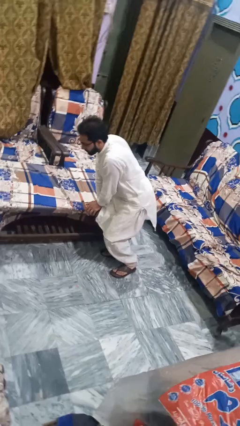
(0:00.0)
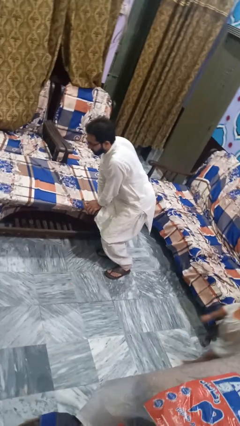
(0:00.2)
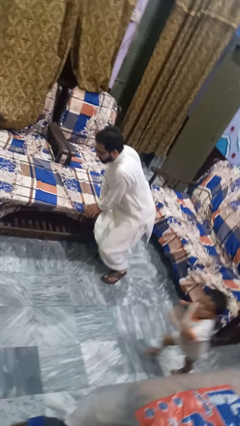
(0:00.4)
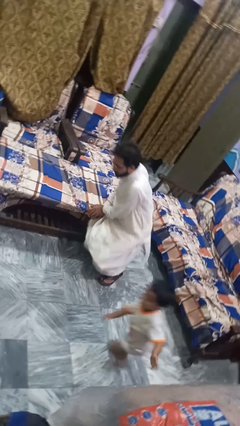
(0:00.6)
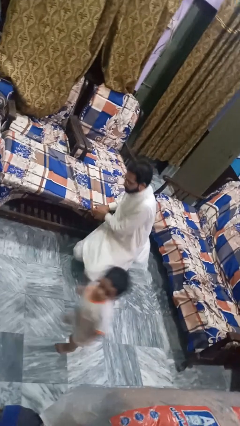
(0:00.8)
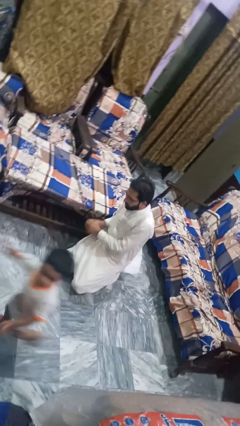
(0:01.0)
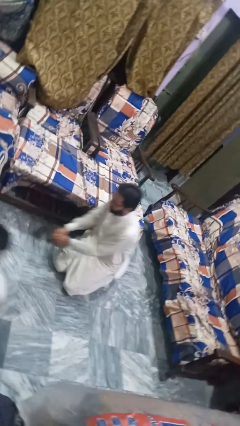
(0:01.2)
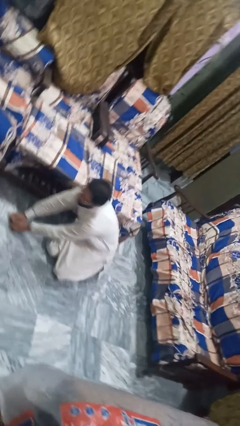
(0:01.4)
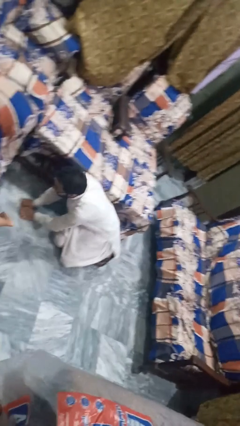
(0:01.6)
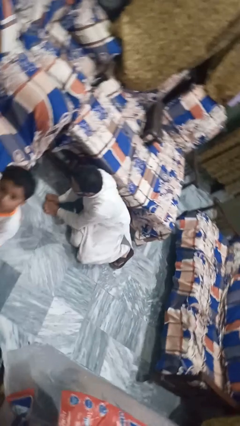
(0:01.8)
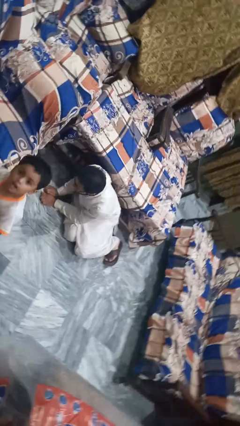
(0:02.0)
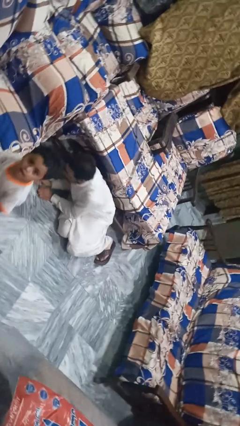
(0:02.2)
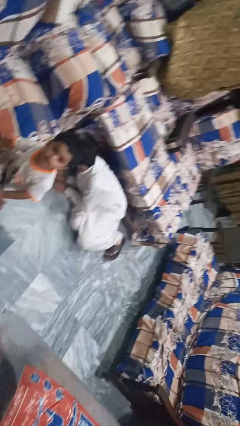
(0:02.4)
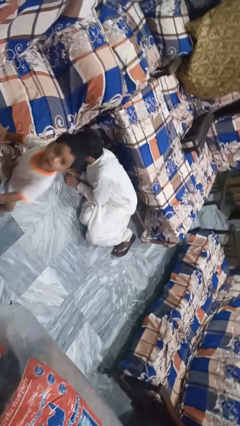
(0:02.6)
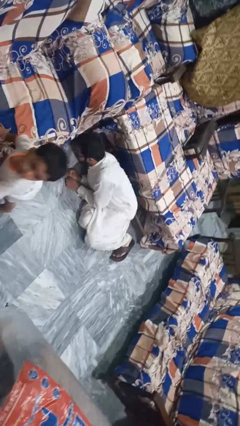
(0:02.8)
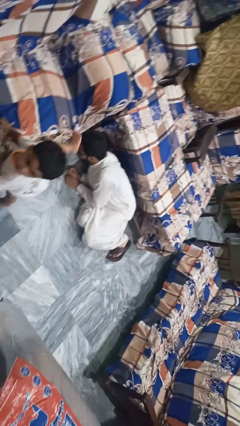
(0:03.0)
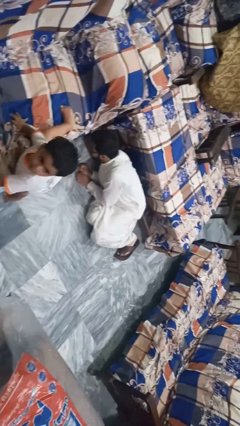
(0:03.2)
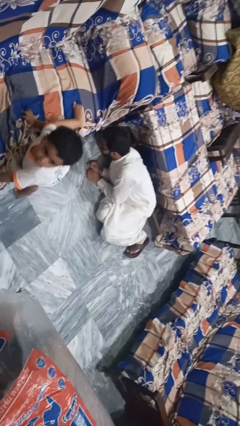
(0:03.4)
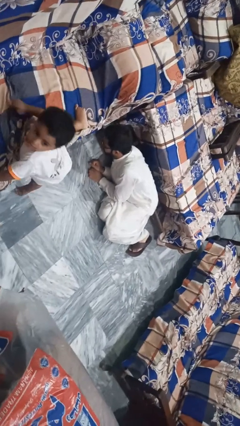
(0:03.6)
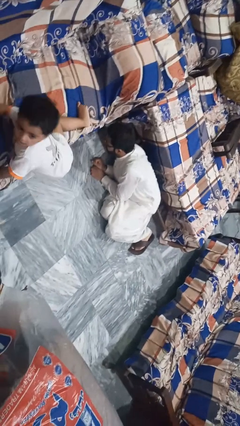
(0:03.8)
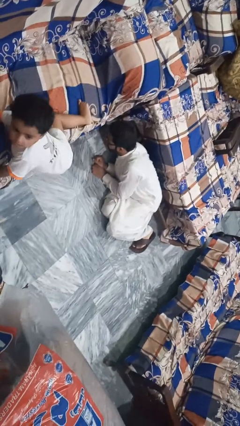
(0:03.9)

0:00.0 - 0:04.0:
person lies down on floor

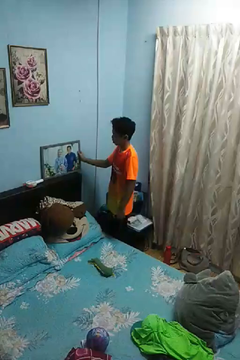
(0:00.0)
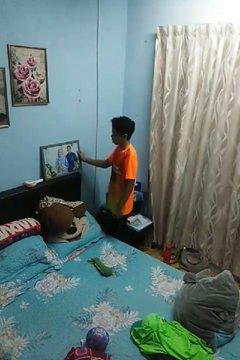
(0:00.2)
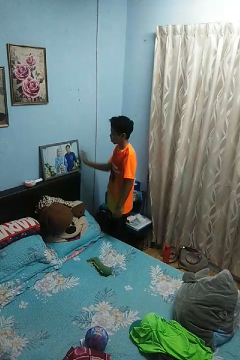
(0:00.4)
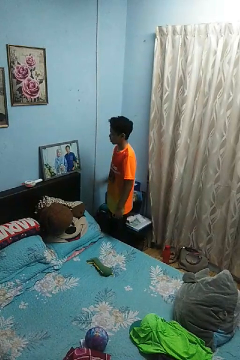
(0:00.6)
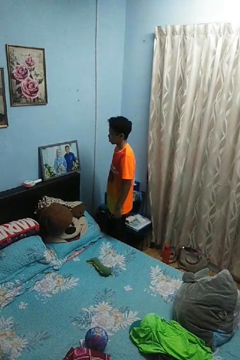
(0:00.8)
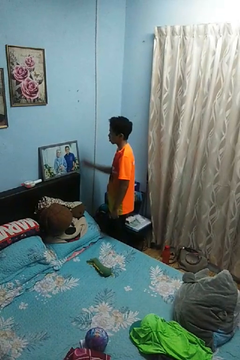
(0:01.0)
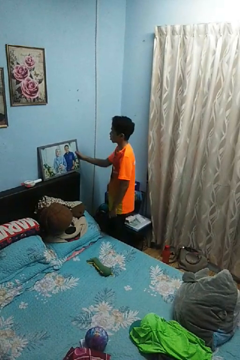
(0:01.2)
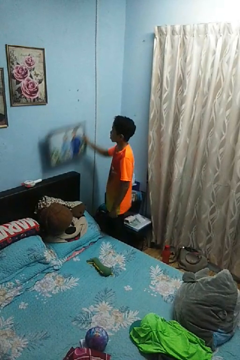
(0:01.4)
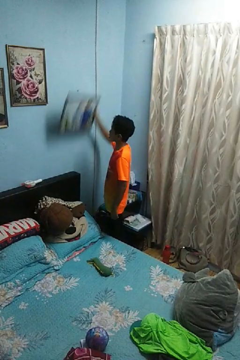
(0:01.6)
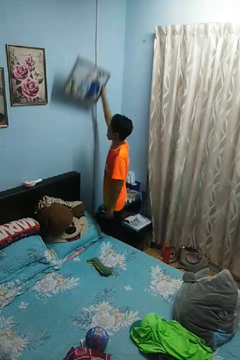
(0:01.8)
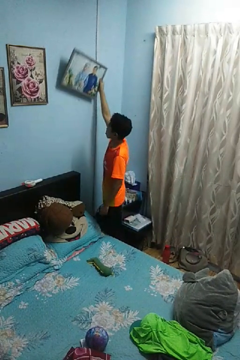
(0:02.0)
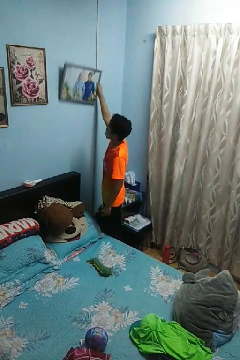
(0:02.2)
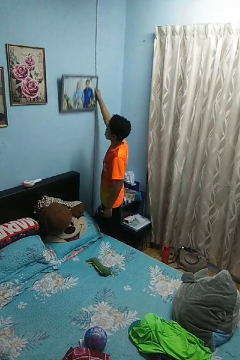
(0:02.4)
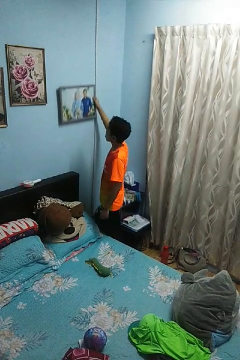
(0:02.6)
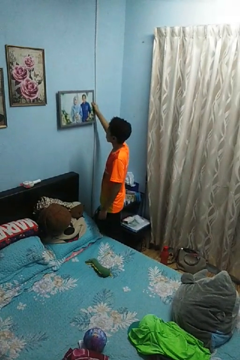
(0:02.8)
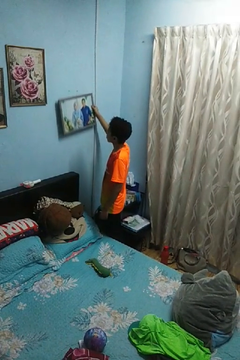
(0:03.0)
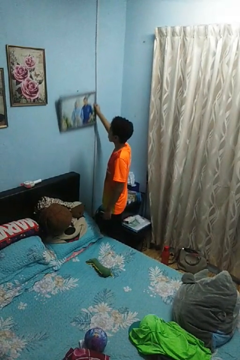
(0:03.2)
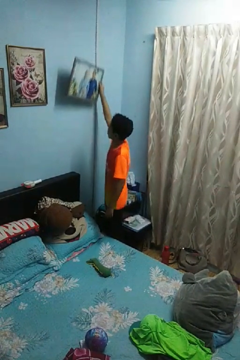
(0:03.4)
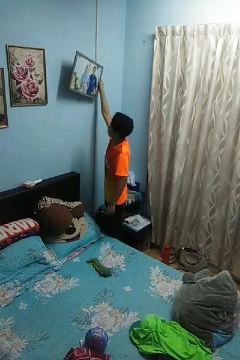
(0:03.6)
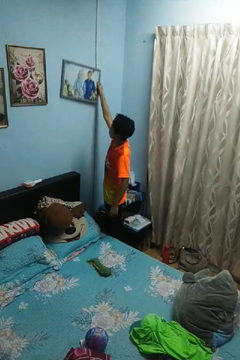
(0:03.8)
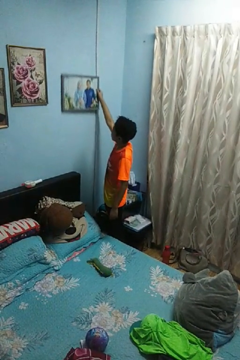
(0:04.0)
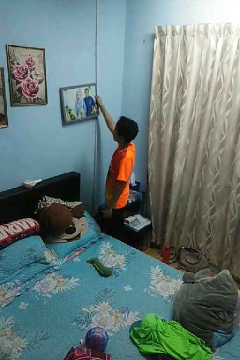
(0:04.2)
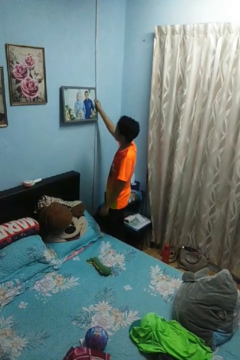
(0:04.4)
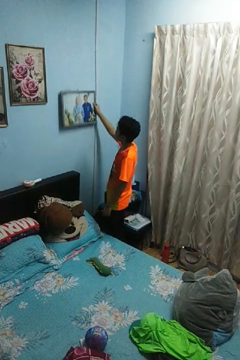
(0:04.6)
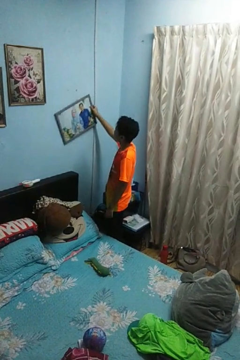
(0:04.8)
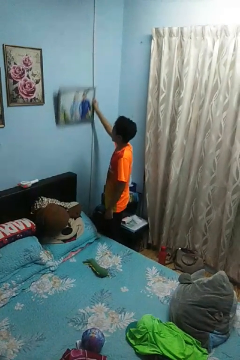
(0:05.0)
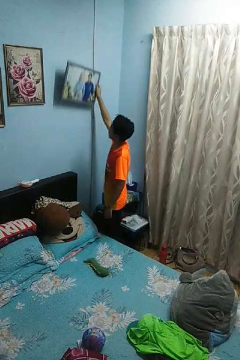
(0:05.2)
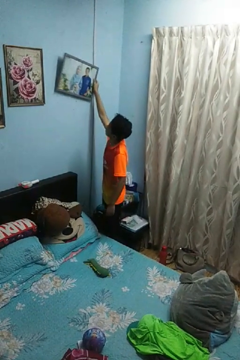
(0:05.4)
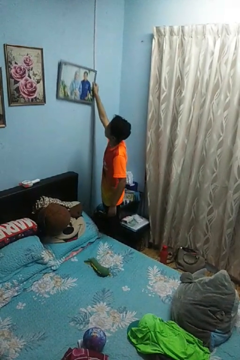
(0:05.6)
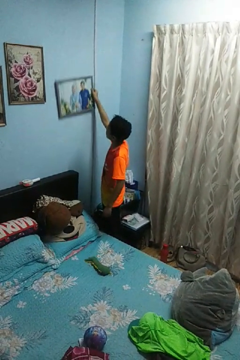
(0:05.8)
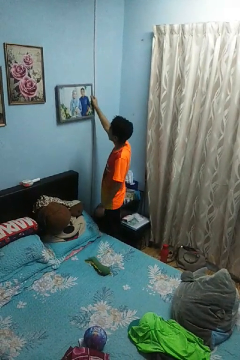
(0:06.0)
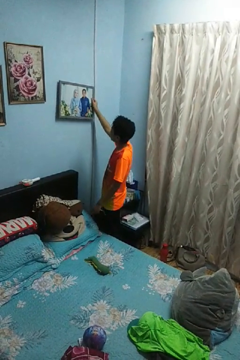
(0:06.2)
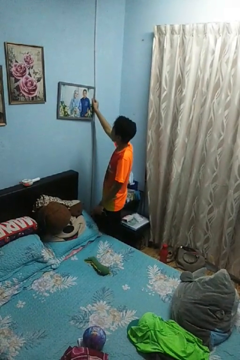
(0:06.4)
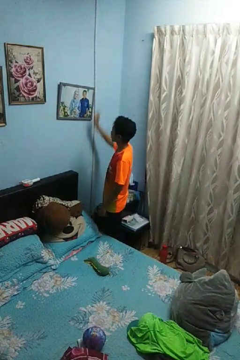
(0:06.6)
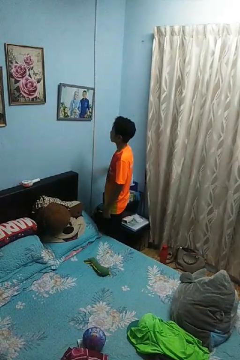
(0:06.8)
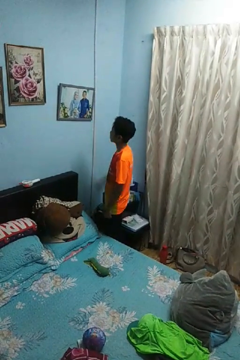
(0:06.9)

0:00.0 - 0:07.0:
person puts up picture frame

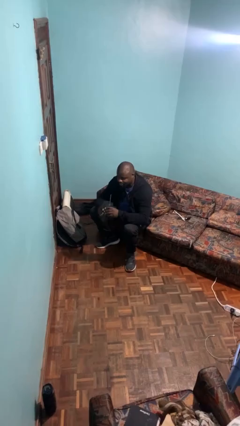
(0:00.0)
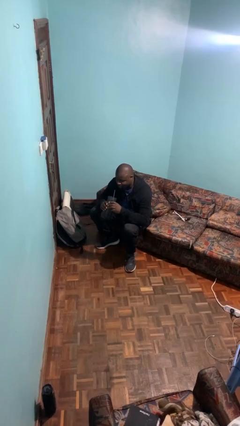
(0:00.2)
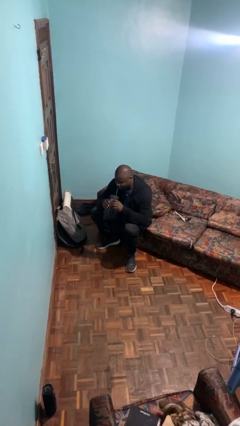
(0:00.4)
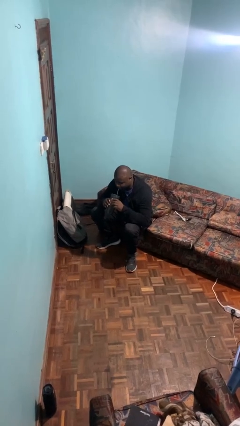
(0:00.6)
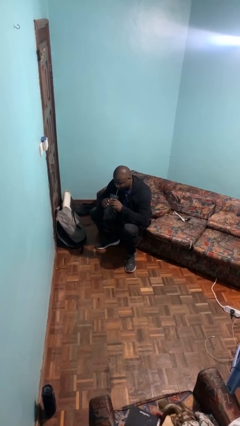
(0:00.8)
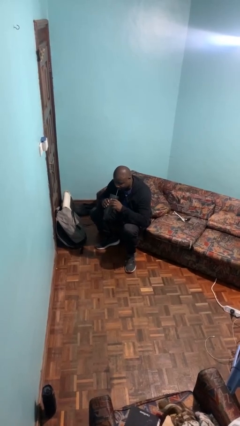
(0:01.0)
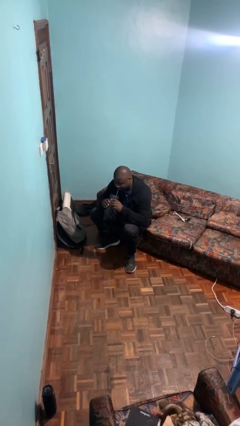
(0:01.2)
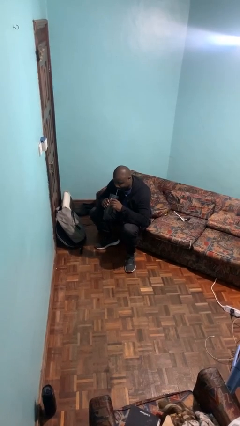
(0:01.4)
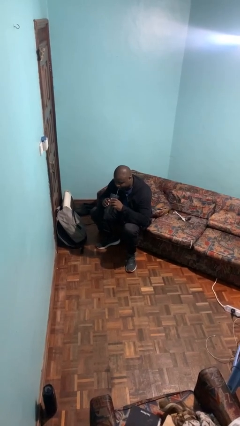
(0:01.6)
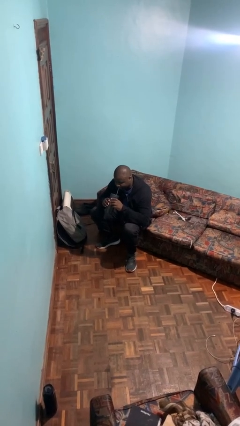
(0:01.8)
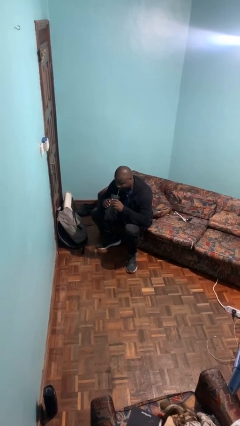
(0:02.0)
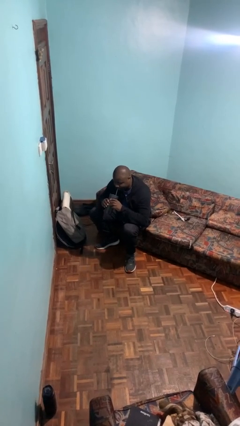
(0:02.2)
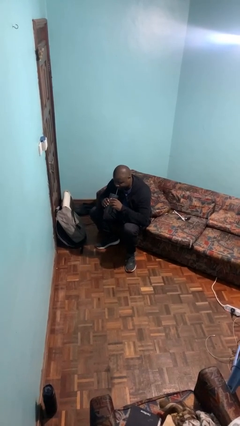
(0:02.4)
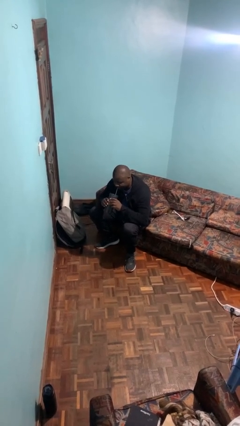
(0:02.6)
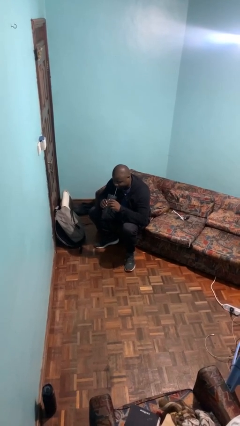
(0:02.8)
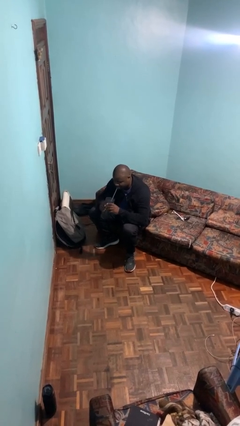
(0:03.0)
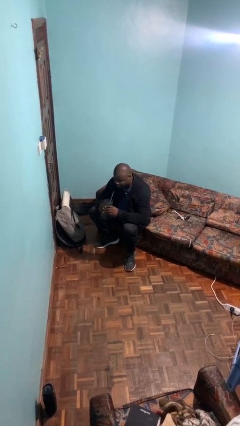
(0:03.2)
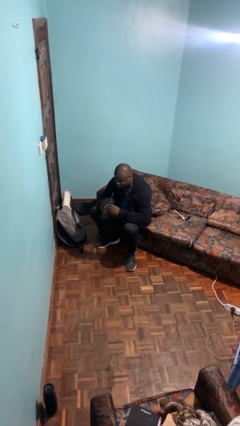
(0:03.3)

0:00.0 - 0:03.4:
person drinks from straw

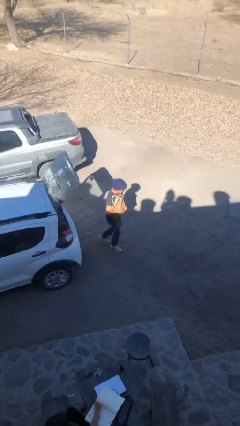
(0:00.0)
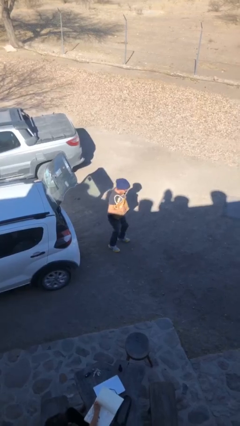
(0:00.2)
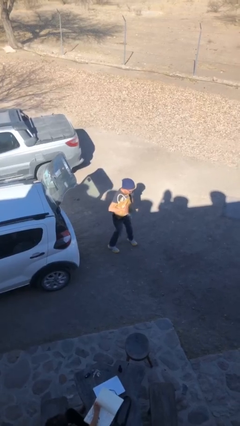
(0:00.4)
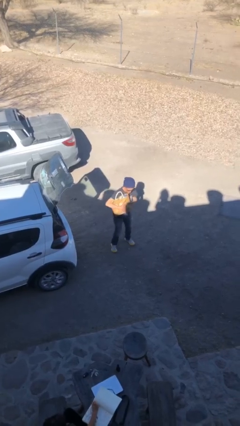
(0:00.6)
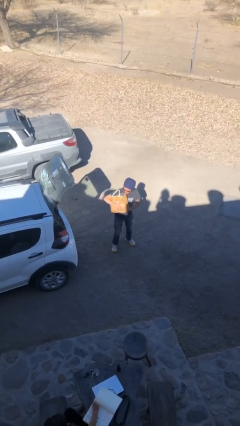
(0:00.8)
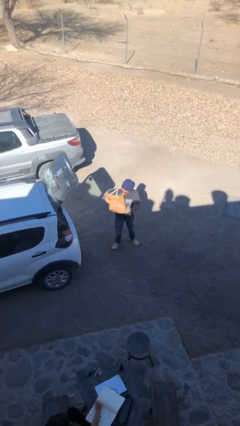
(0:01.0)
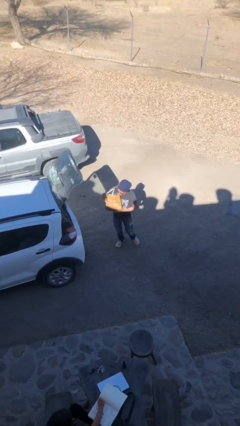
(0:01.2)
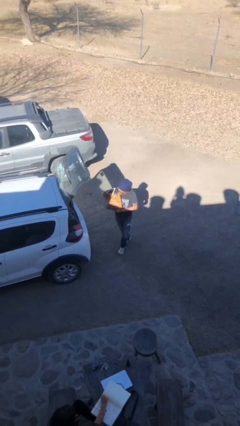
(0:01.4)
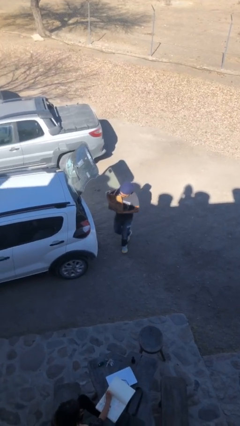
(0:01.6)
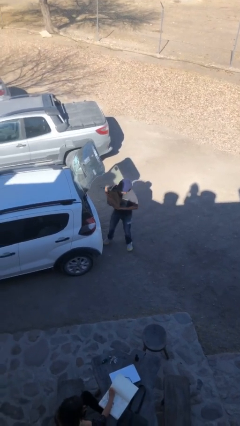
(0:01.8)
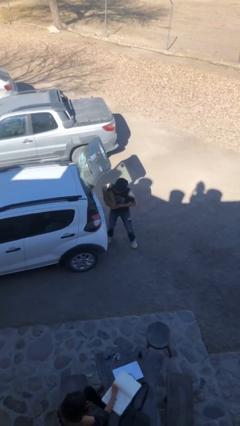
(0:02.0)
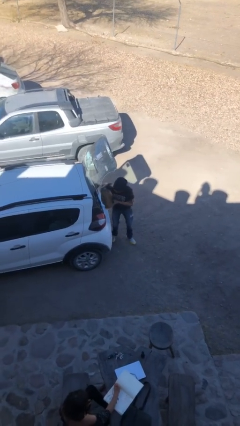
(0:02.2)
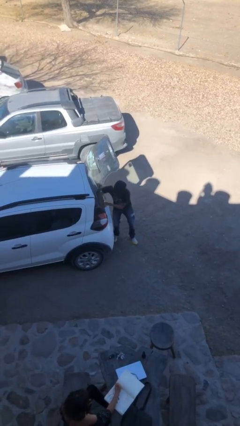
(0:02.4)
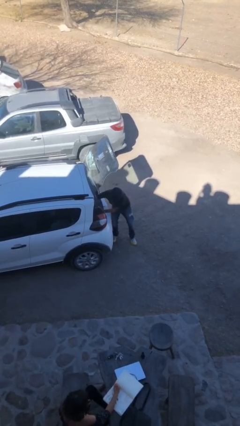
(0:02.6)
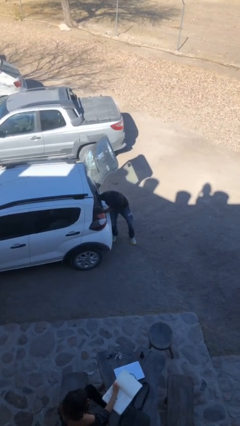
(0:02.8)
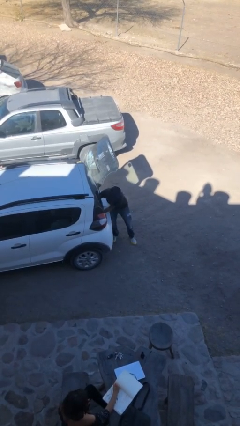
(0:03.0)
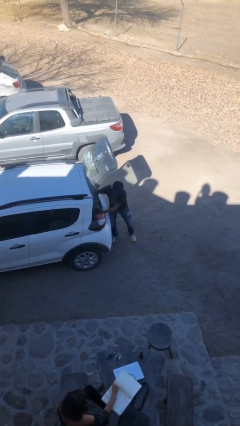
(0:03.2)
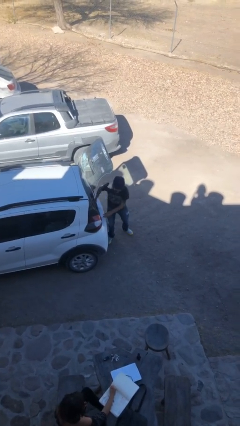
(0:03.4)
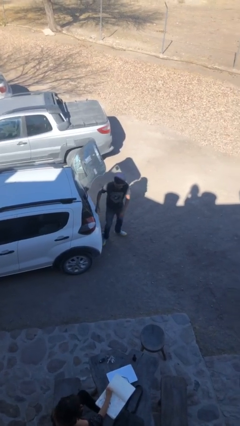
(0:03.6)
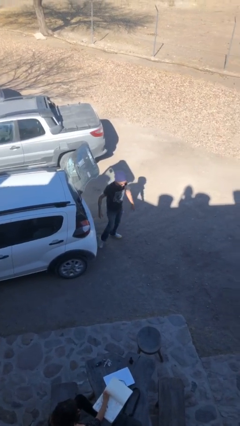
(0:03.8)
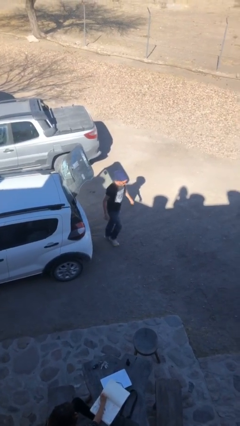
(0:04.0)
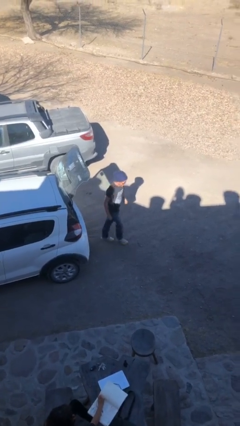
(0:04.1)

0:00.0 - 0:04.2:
person loads car
